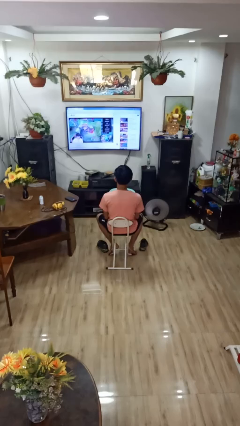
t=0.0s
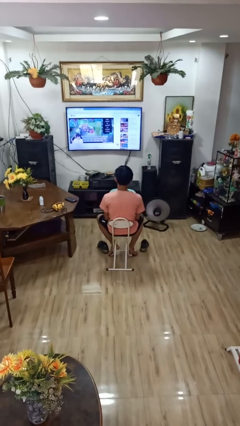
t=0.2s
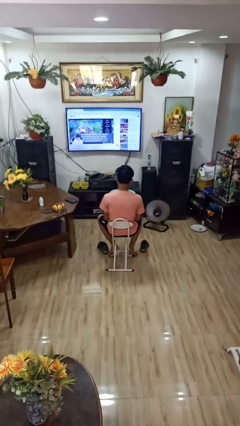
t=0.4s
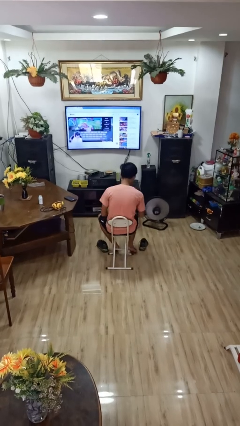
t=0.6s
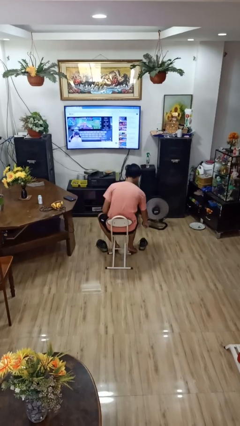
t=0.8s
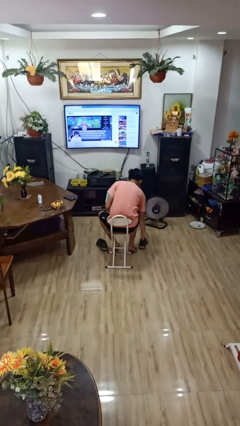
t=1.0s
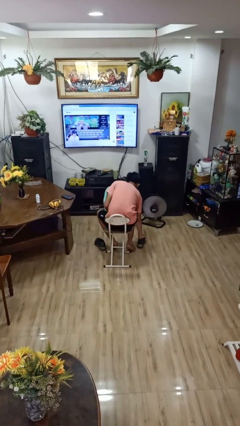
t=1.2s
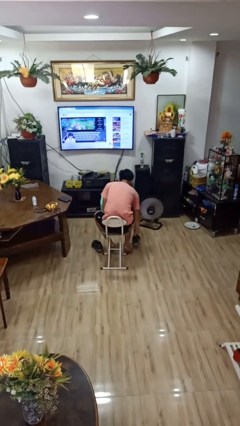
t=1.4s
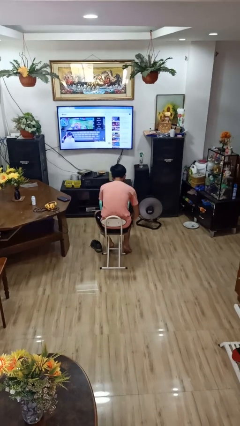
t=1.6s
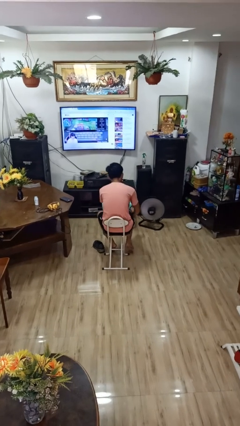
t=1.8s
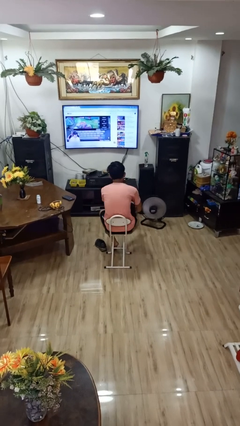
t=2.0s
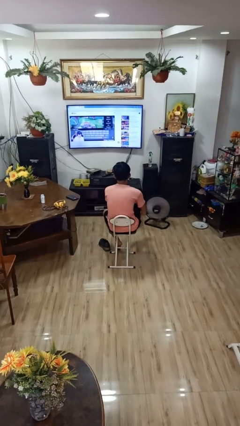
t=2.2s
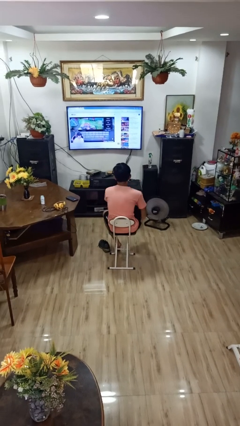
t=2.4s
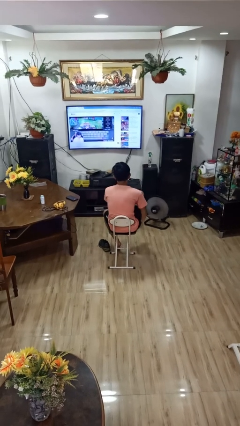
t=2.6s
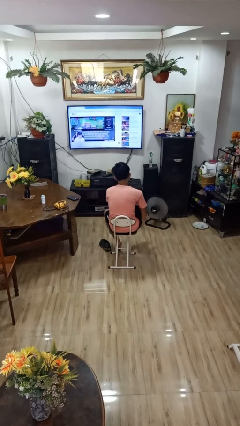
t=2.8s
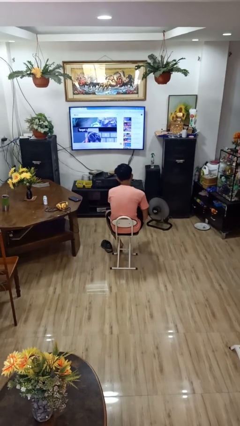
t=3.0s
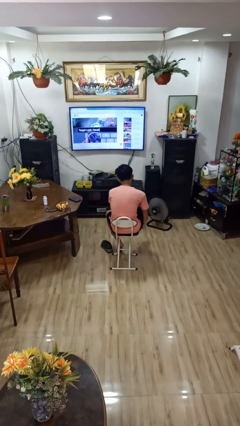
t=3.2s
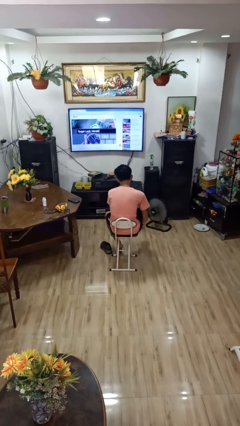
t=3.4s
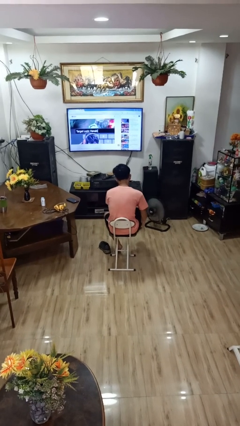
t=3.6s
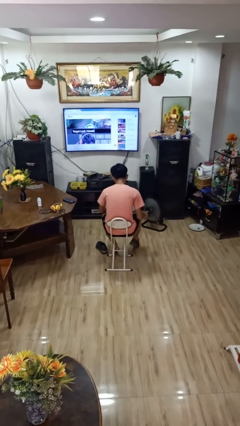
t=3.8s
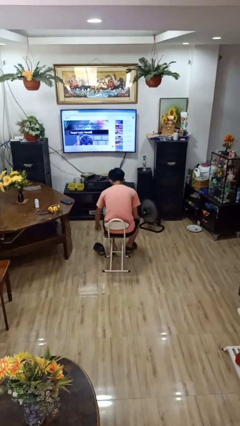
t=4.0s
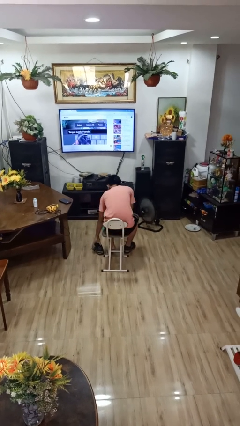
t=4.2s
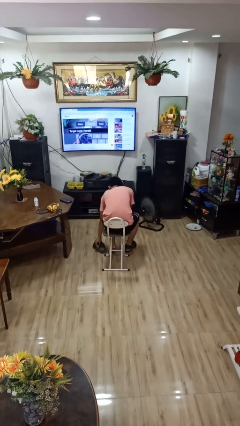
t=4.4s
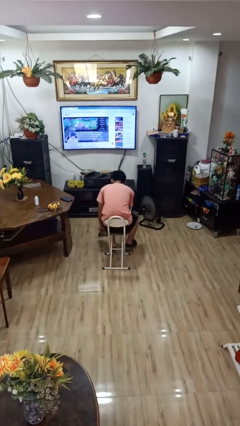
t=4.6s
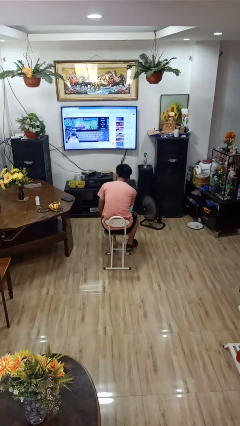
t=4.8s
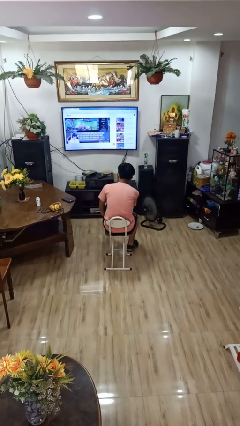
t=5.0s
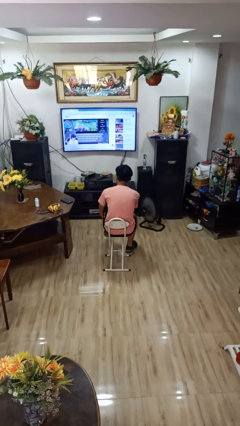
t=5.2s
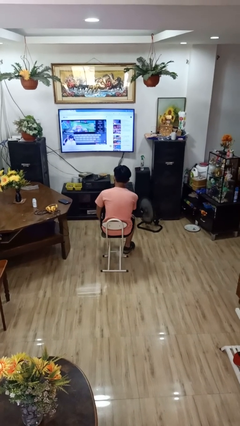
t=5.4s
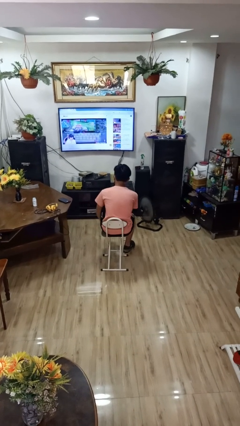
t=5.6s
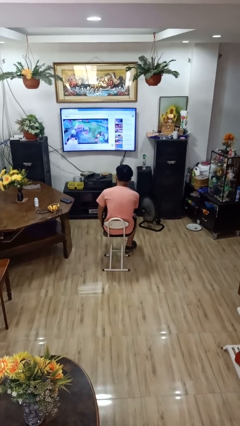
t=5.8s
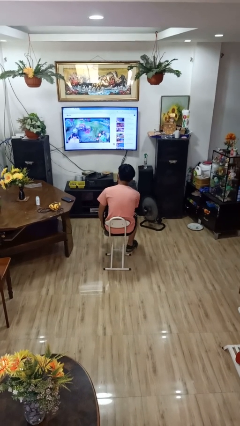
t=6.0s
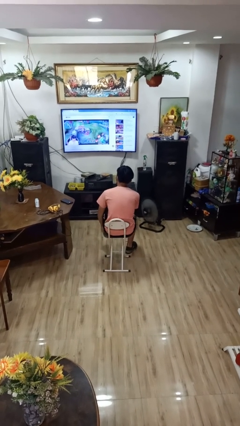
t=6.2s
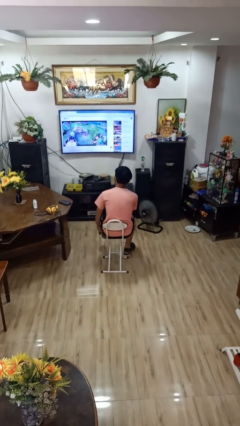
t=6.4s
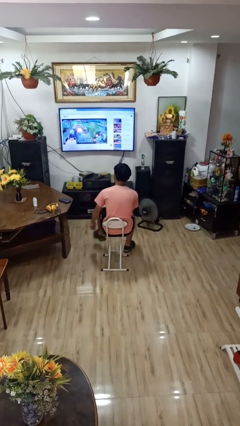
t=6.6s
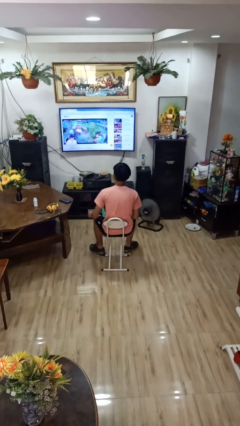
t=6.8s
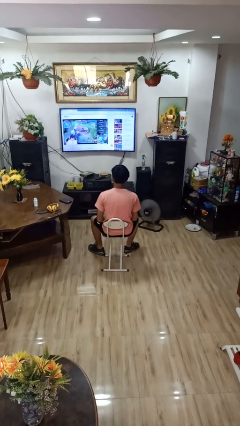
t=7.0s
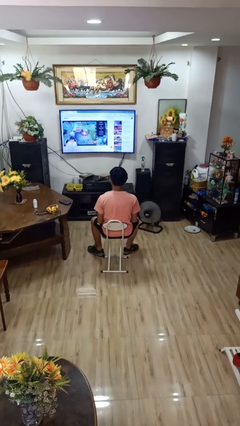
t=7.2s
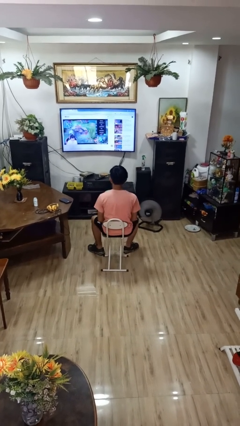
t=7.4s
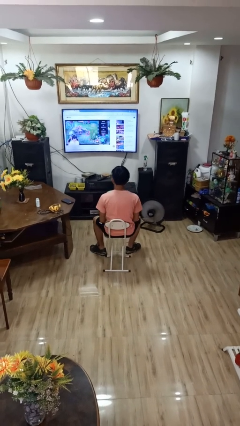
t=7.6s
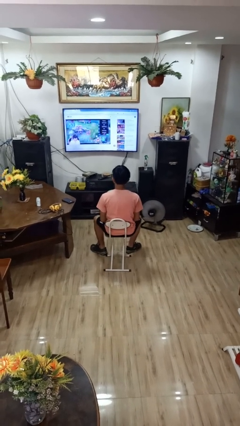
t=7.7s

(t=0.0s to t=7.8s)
person puts on shoes

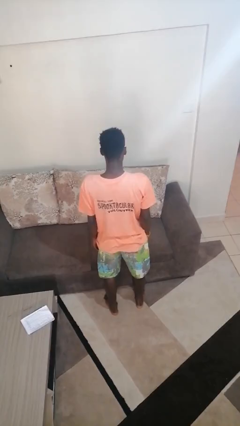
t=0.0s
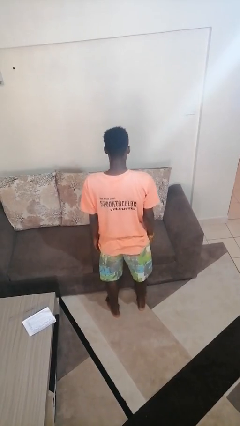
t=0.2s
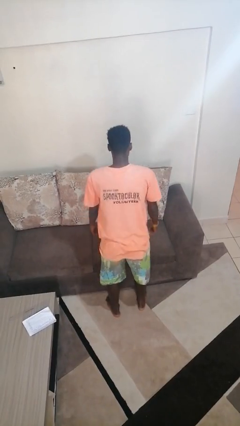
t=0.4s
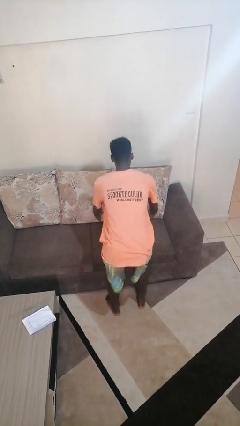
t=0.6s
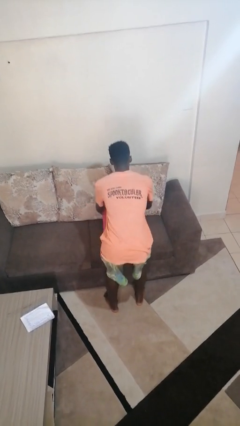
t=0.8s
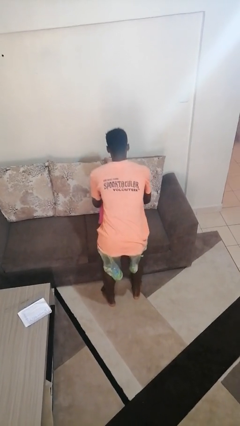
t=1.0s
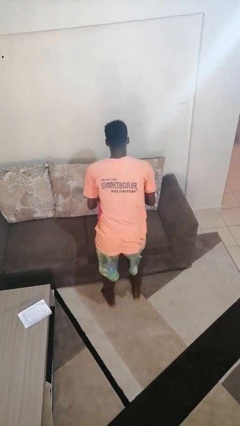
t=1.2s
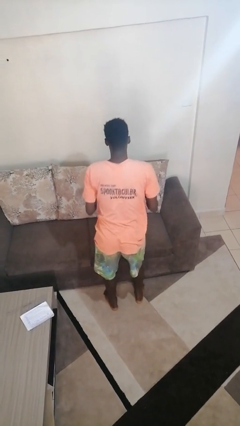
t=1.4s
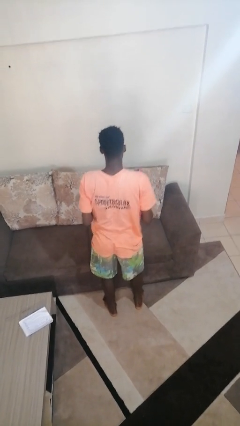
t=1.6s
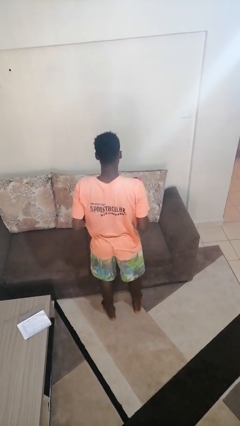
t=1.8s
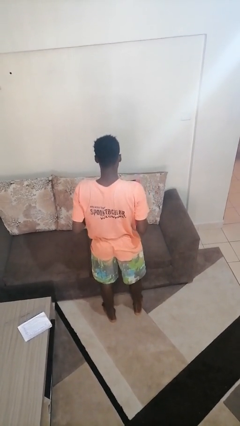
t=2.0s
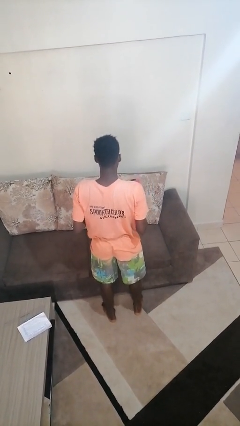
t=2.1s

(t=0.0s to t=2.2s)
person picks up object from couch

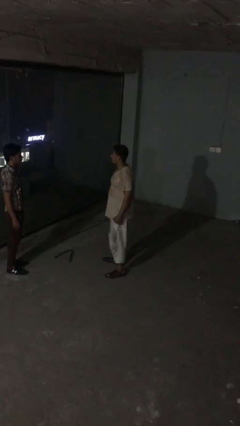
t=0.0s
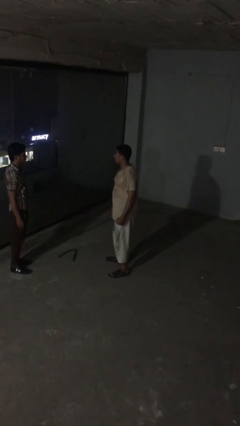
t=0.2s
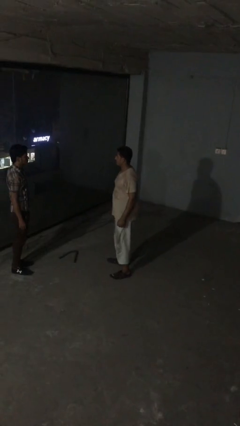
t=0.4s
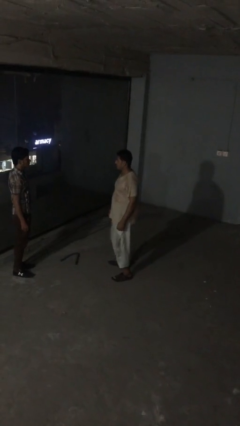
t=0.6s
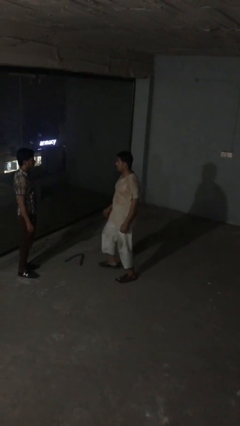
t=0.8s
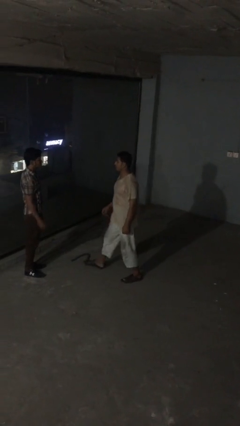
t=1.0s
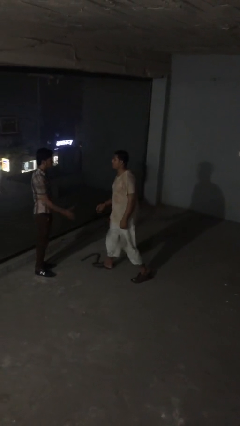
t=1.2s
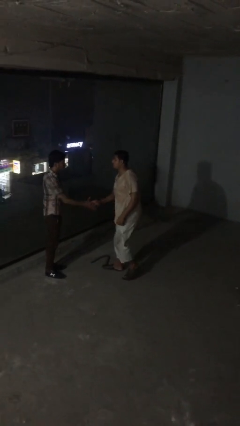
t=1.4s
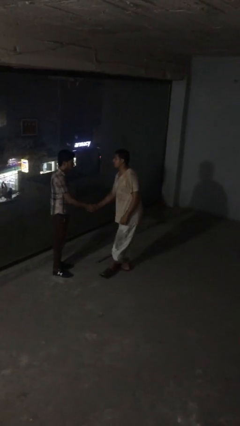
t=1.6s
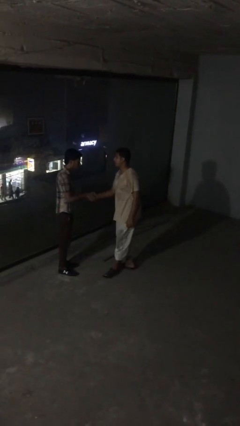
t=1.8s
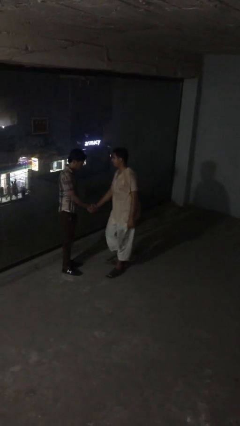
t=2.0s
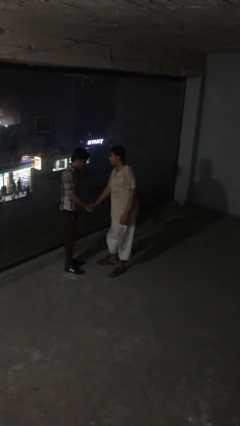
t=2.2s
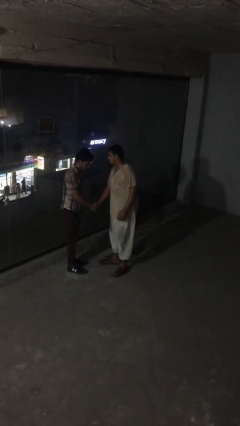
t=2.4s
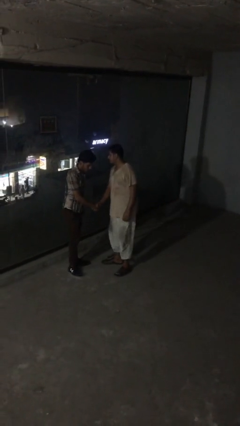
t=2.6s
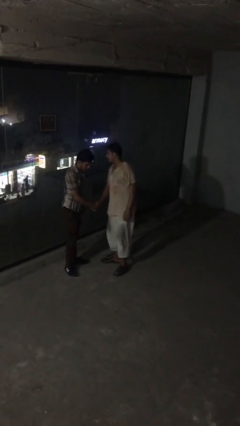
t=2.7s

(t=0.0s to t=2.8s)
person shakes hand

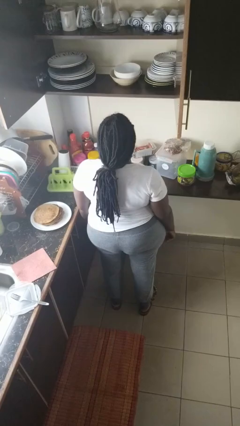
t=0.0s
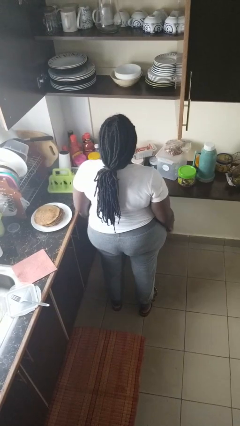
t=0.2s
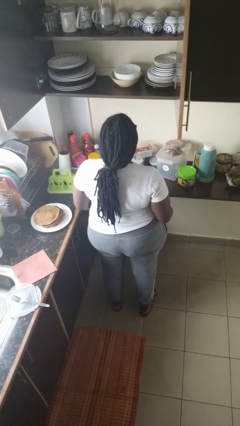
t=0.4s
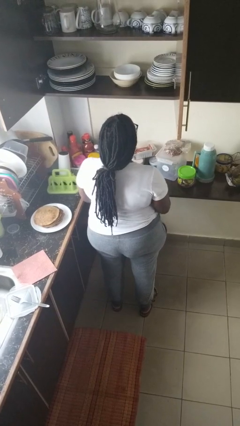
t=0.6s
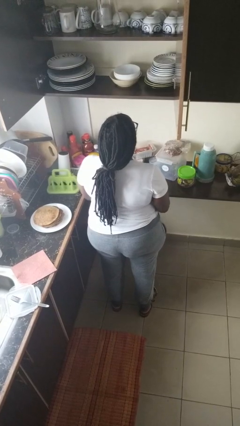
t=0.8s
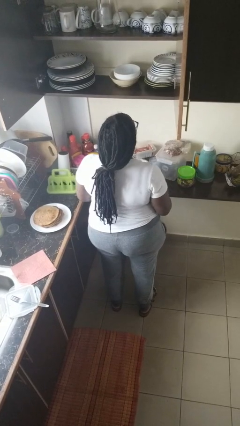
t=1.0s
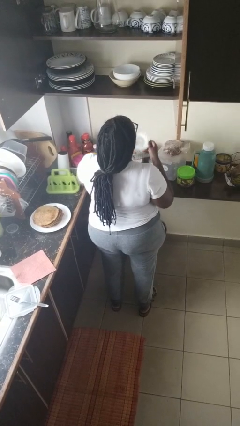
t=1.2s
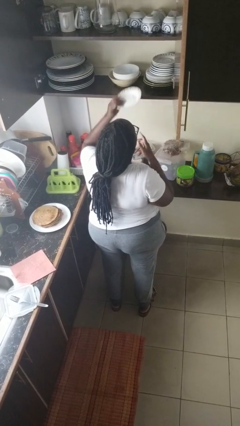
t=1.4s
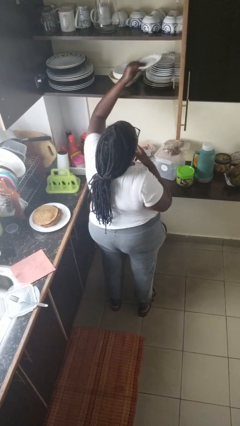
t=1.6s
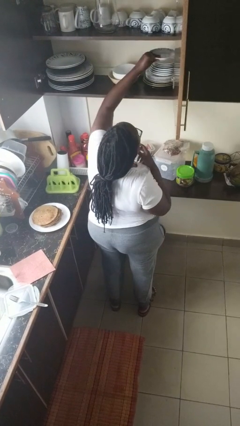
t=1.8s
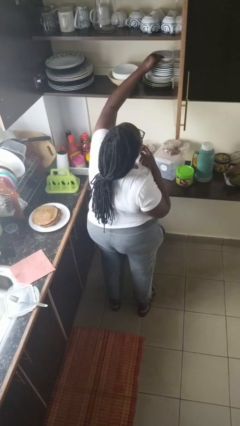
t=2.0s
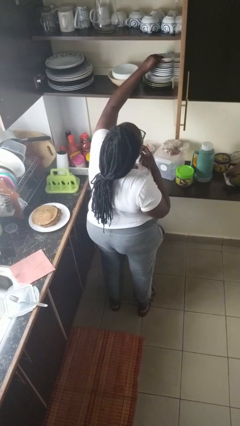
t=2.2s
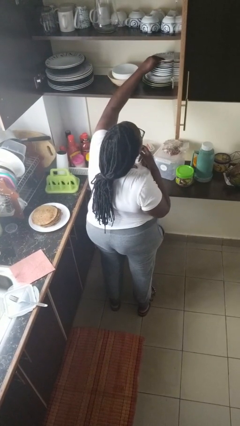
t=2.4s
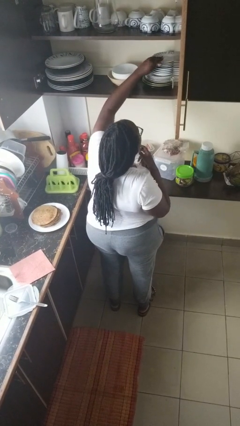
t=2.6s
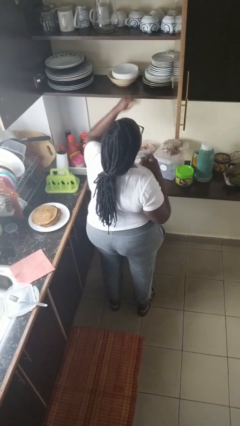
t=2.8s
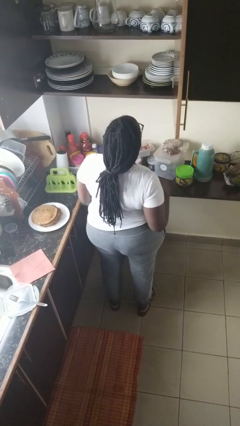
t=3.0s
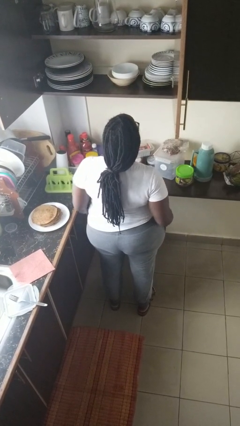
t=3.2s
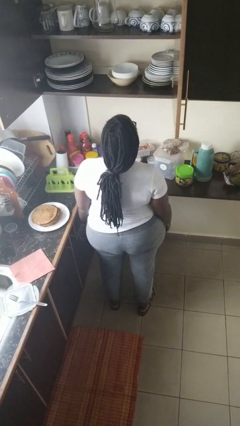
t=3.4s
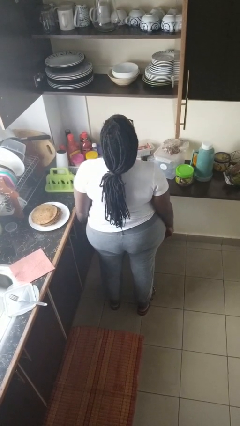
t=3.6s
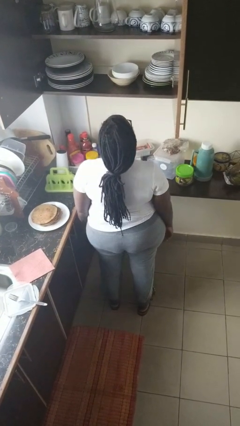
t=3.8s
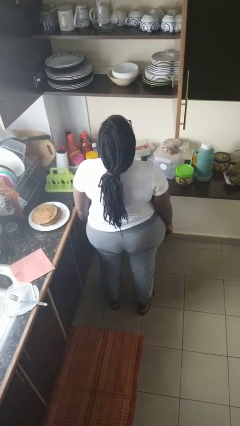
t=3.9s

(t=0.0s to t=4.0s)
person puts object in cabinet

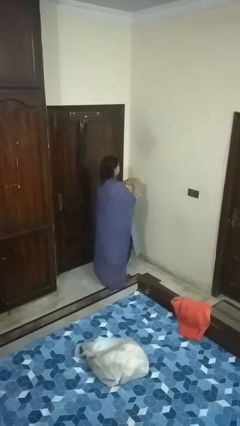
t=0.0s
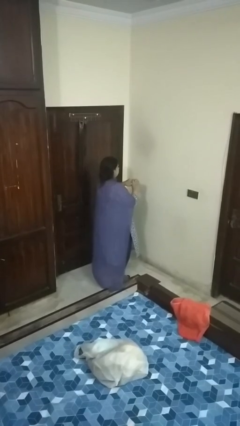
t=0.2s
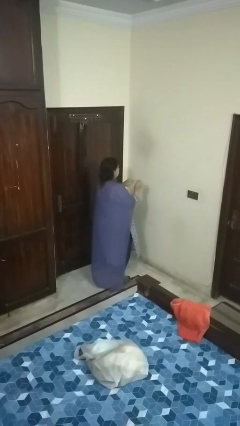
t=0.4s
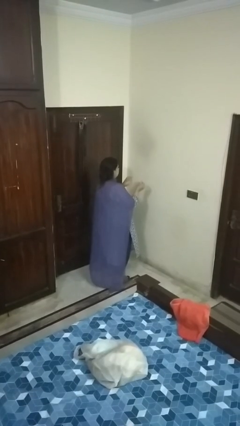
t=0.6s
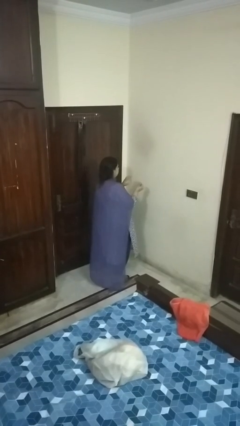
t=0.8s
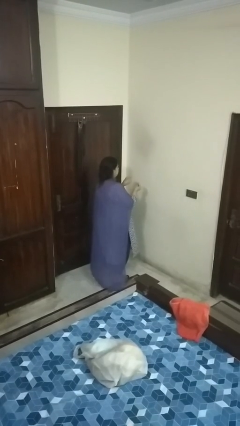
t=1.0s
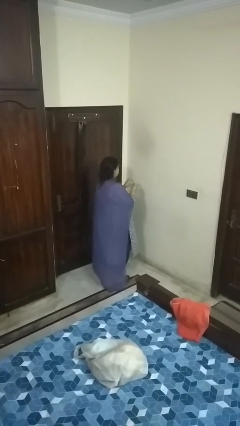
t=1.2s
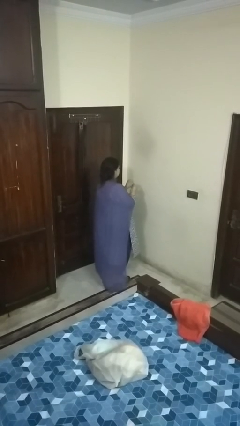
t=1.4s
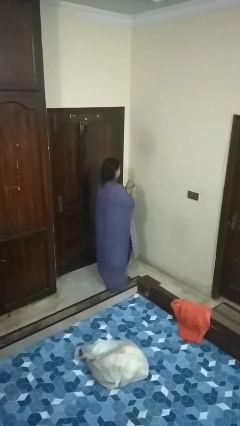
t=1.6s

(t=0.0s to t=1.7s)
person takes off ring
